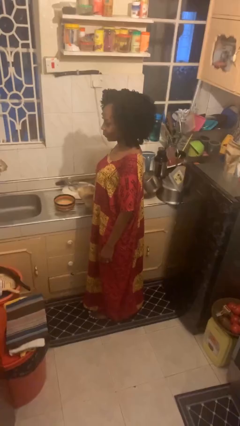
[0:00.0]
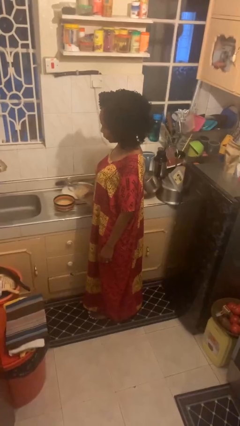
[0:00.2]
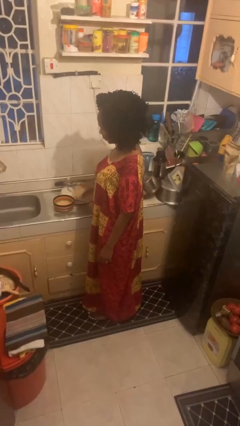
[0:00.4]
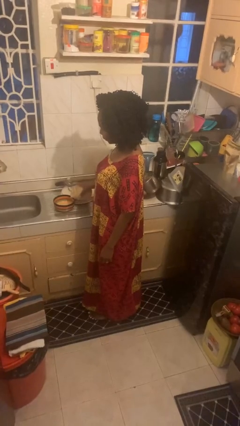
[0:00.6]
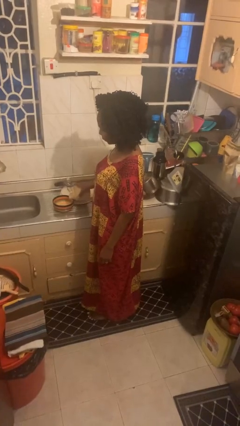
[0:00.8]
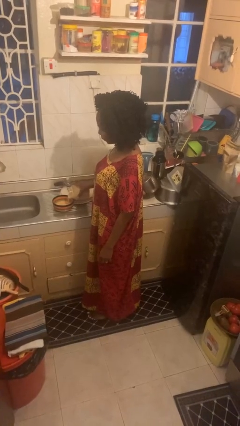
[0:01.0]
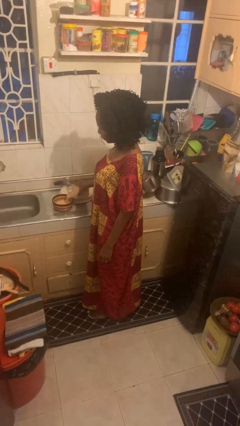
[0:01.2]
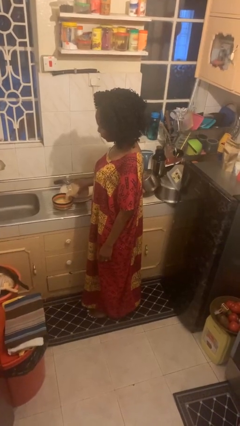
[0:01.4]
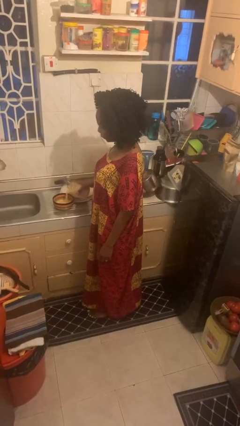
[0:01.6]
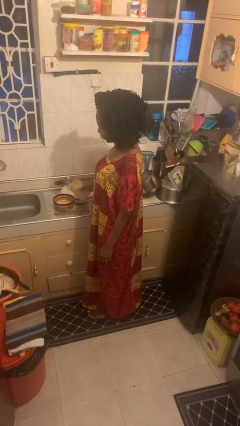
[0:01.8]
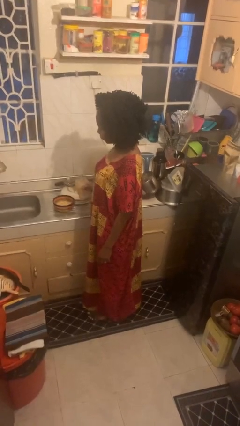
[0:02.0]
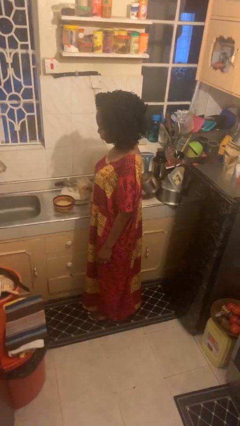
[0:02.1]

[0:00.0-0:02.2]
person pours into bowl

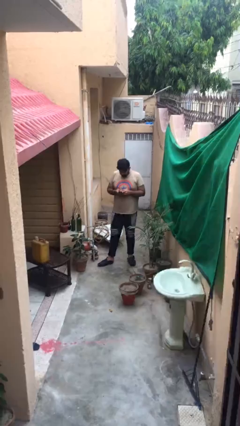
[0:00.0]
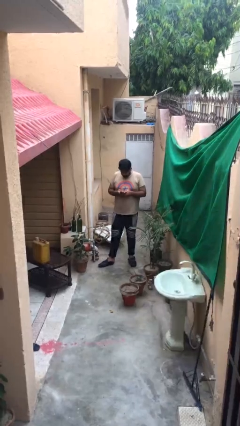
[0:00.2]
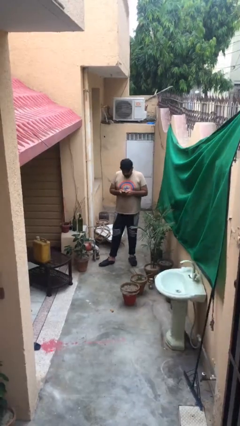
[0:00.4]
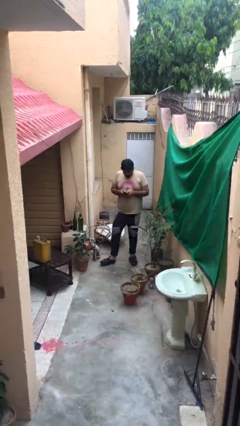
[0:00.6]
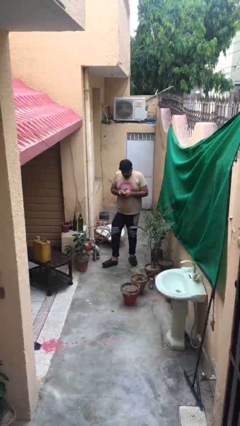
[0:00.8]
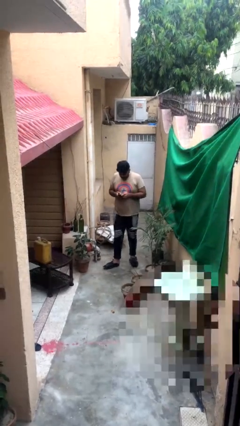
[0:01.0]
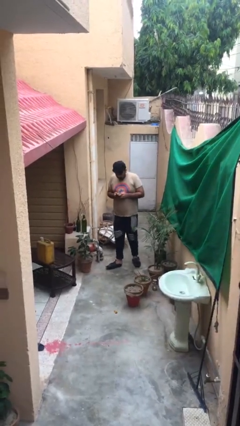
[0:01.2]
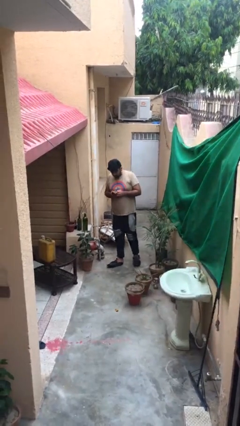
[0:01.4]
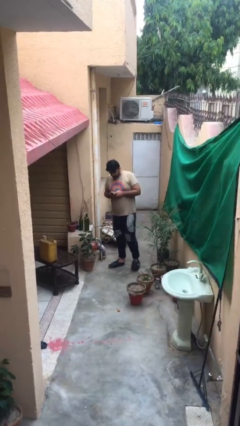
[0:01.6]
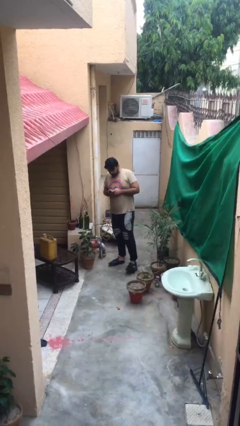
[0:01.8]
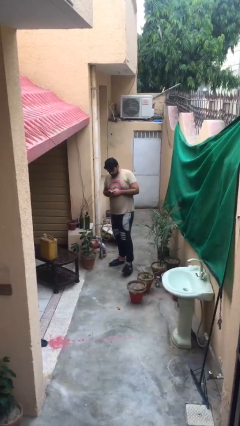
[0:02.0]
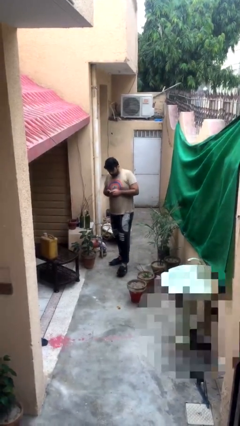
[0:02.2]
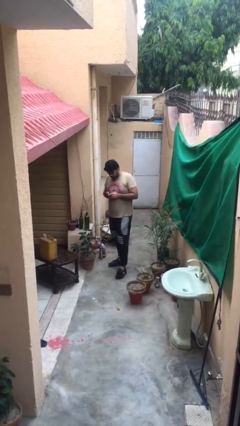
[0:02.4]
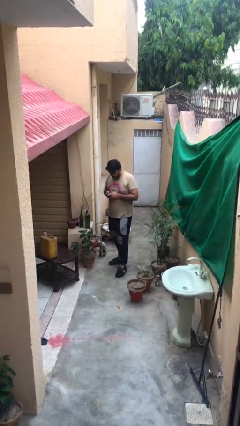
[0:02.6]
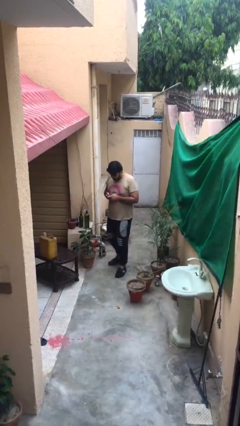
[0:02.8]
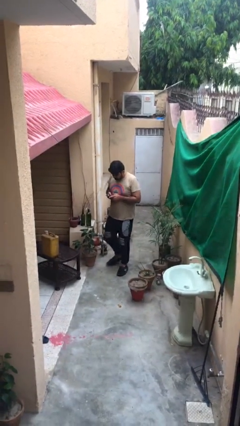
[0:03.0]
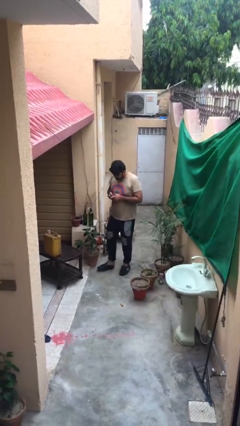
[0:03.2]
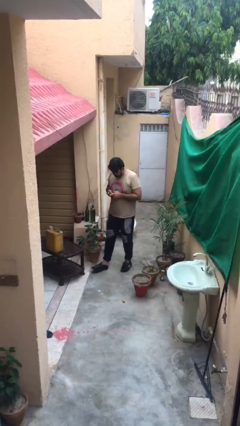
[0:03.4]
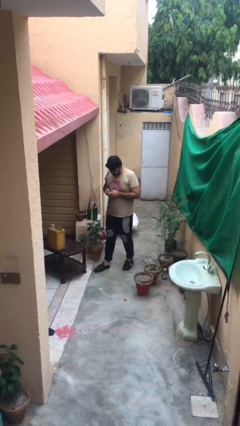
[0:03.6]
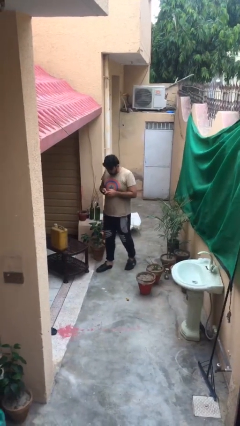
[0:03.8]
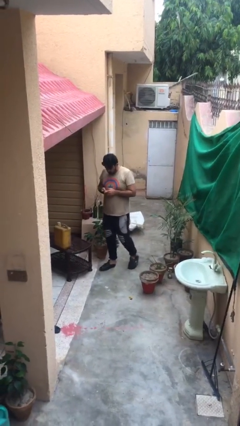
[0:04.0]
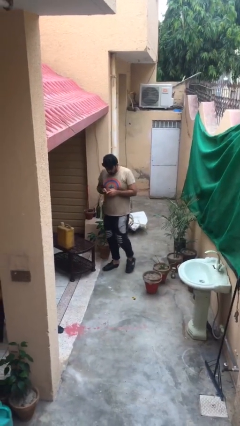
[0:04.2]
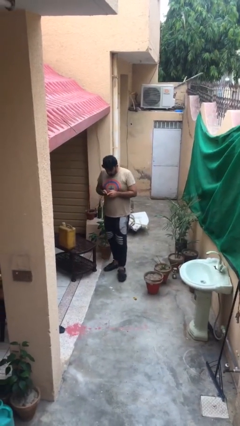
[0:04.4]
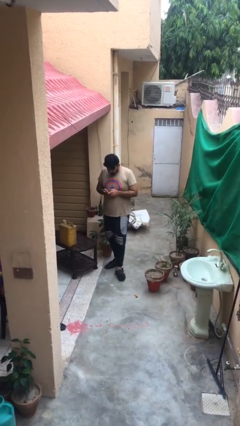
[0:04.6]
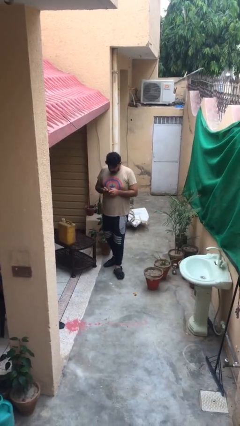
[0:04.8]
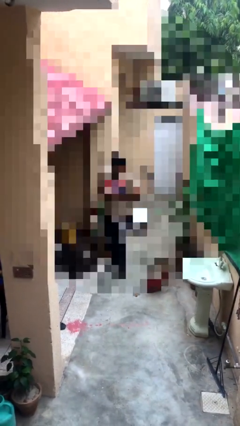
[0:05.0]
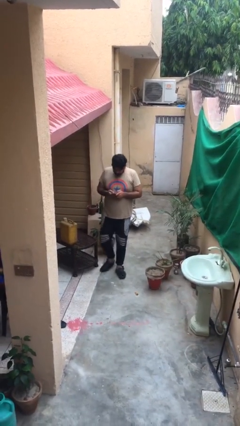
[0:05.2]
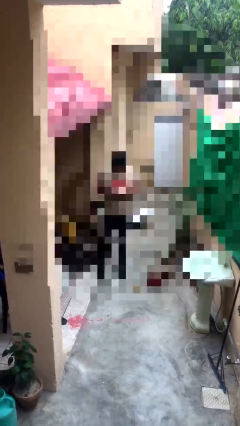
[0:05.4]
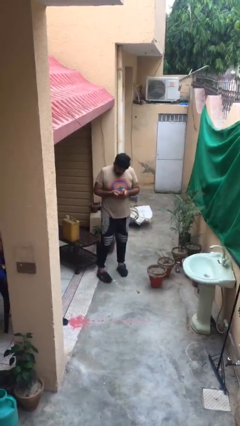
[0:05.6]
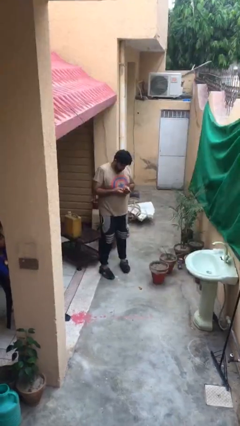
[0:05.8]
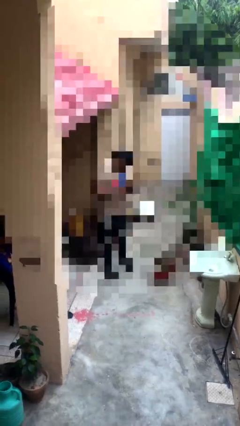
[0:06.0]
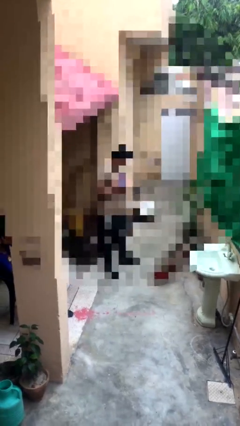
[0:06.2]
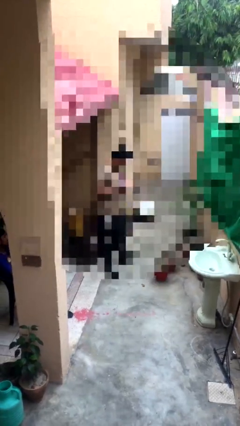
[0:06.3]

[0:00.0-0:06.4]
person texts on phone

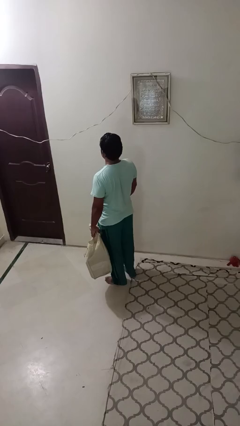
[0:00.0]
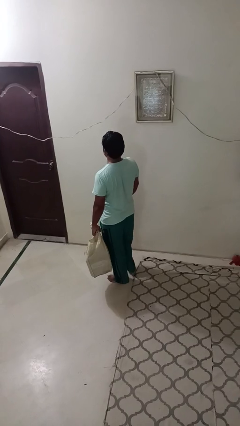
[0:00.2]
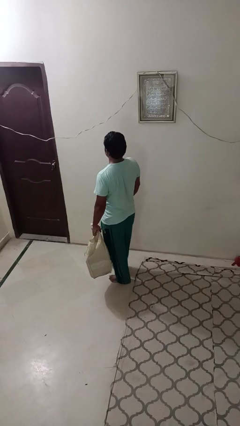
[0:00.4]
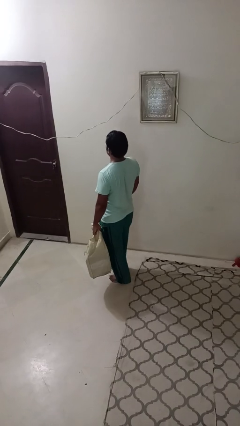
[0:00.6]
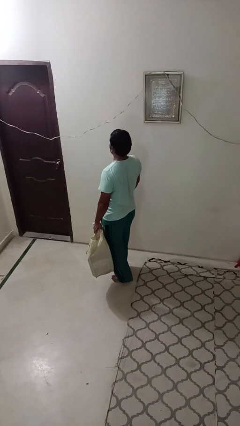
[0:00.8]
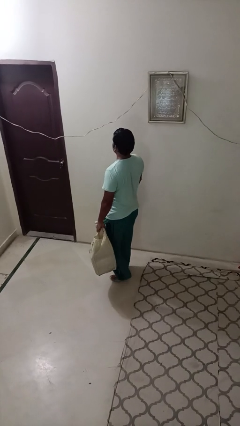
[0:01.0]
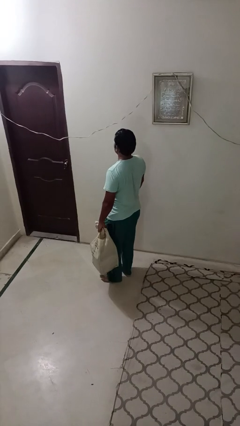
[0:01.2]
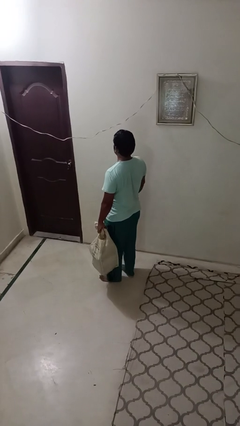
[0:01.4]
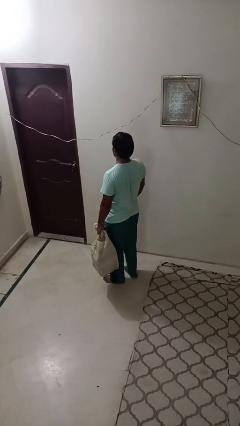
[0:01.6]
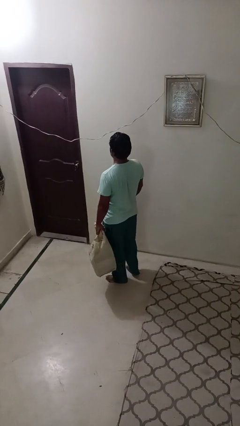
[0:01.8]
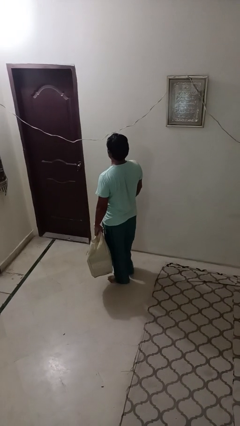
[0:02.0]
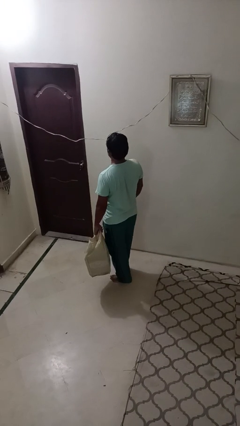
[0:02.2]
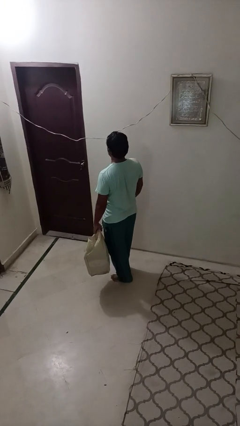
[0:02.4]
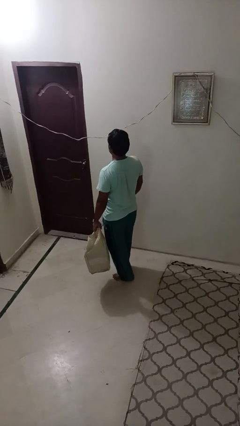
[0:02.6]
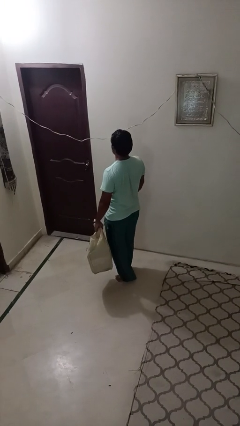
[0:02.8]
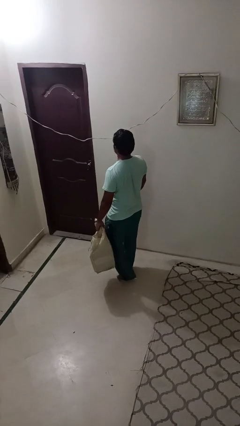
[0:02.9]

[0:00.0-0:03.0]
person carries groceries

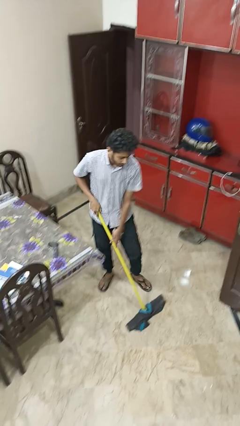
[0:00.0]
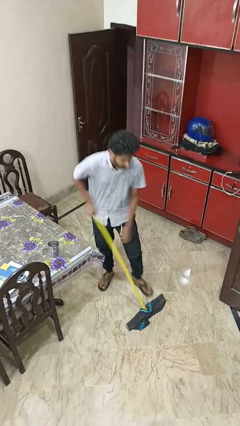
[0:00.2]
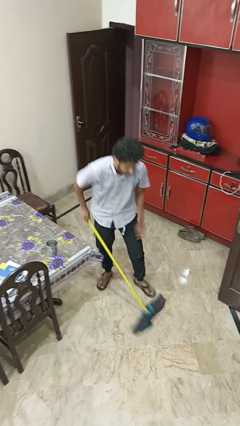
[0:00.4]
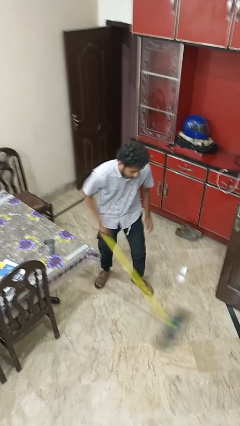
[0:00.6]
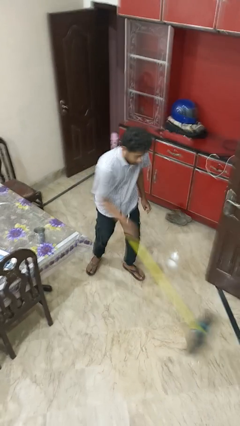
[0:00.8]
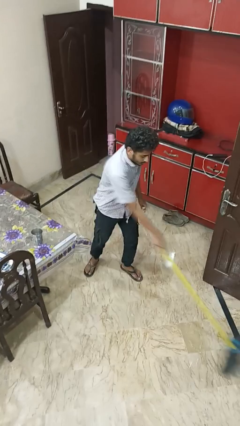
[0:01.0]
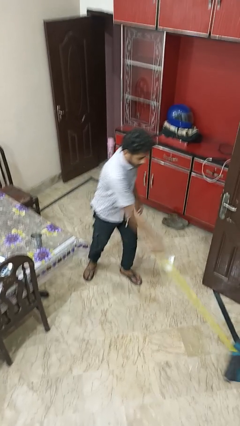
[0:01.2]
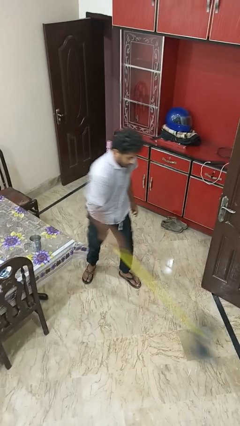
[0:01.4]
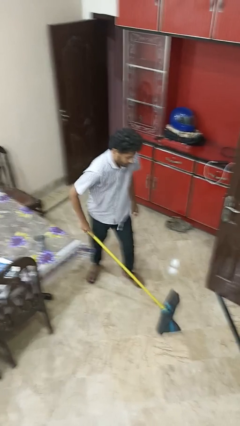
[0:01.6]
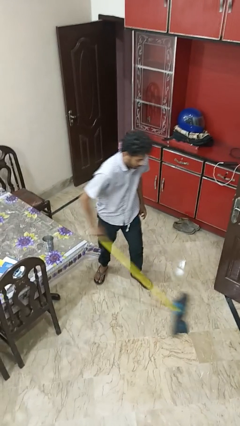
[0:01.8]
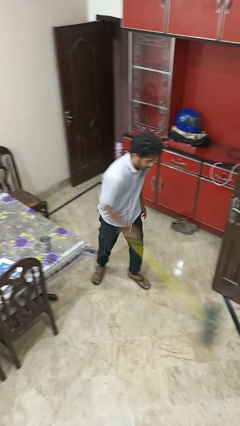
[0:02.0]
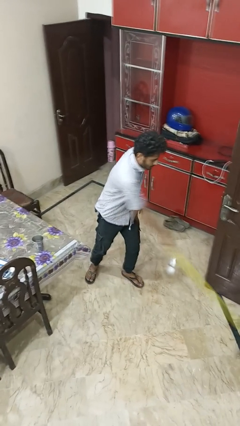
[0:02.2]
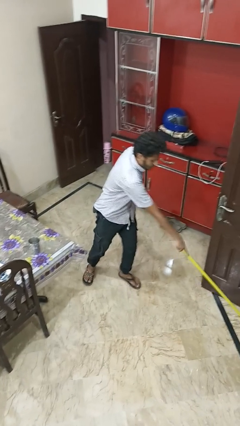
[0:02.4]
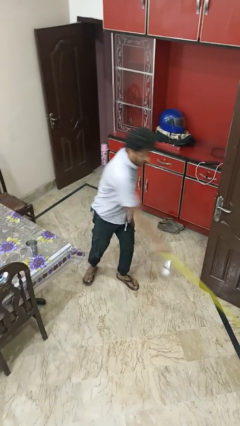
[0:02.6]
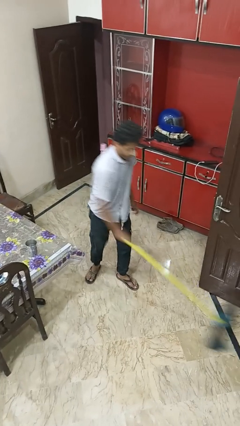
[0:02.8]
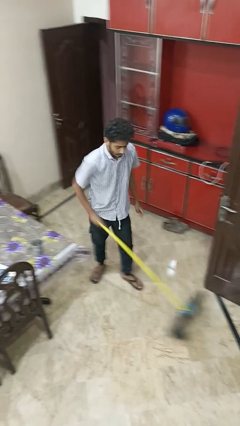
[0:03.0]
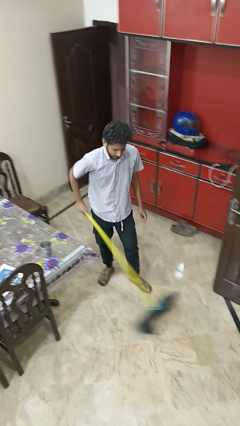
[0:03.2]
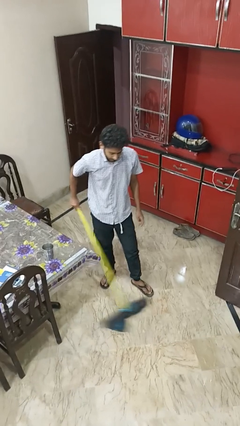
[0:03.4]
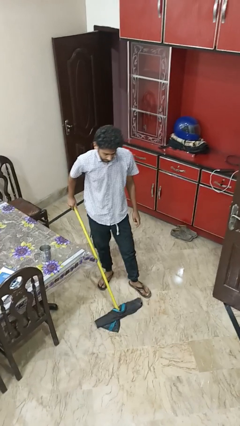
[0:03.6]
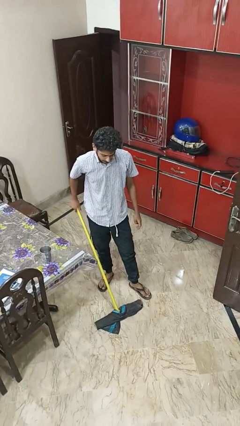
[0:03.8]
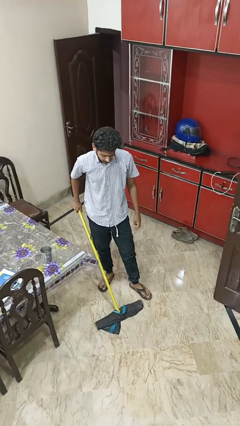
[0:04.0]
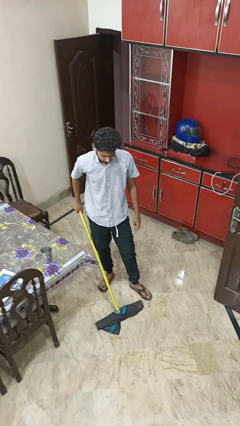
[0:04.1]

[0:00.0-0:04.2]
person mops

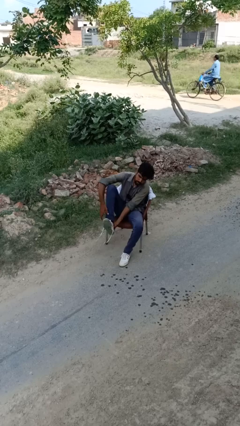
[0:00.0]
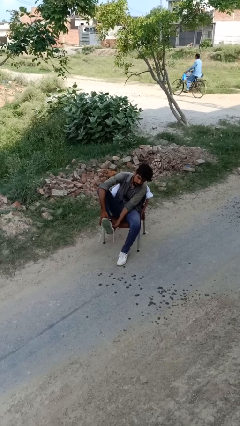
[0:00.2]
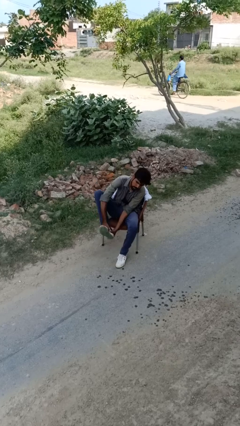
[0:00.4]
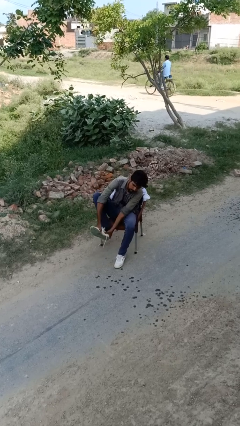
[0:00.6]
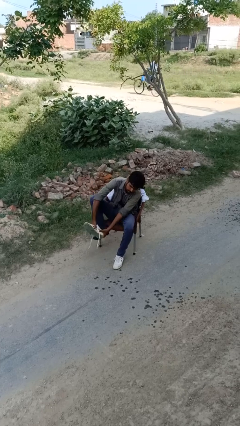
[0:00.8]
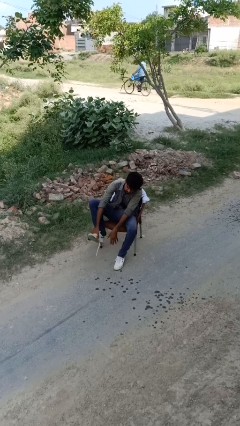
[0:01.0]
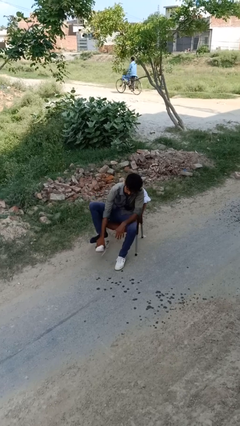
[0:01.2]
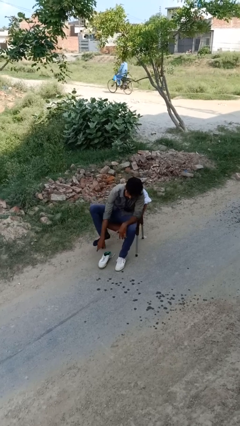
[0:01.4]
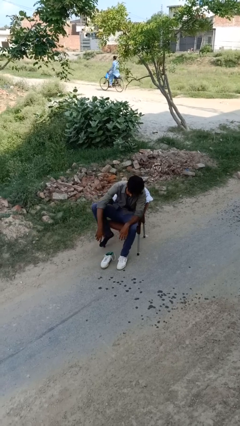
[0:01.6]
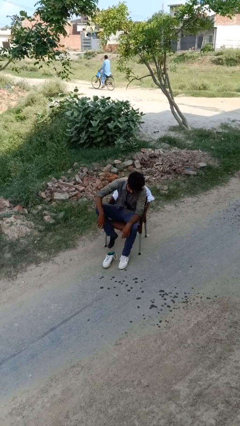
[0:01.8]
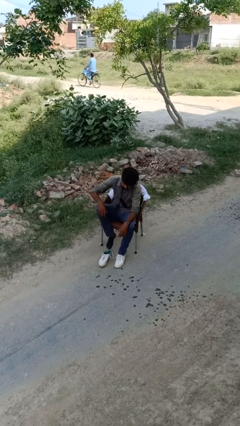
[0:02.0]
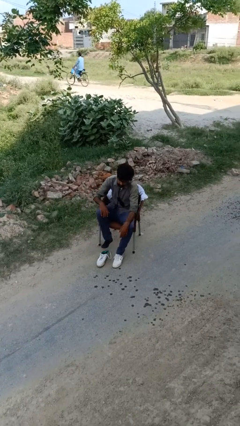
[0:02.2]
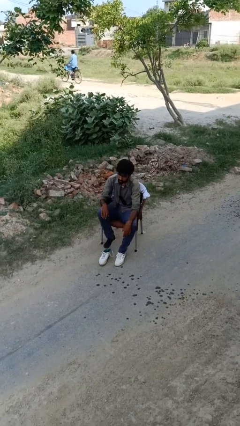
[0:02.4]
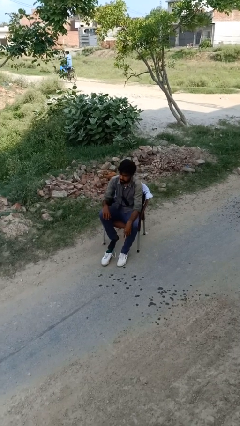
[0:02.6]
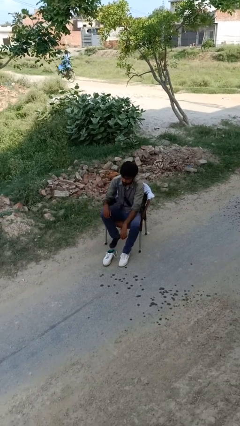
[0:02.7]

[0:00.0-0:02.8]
person takes off shoes
